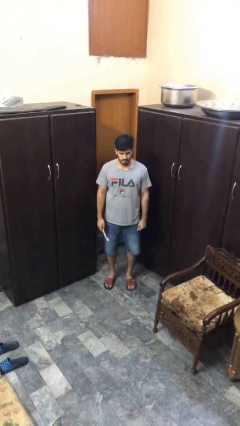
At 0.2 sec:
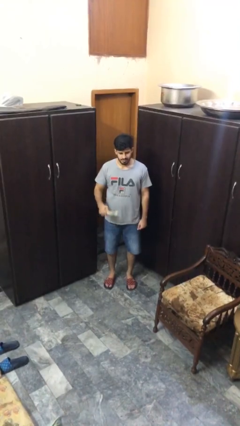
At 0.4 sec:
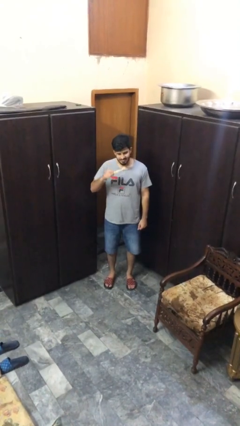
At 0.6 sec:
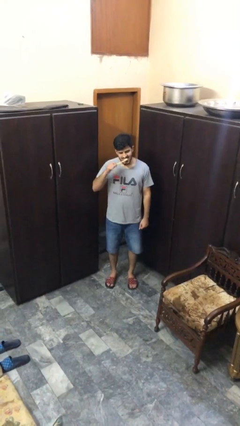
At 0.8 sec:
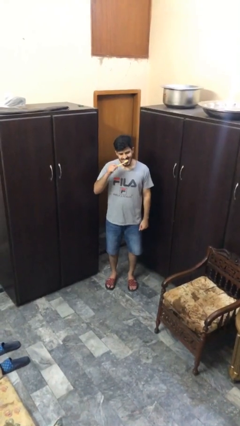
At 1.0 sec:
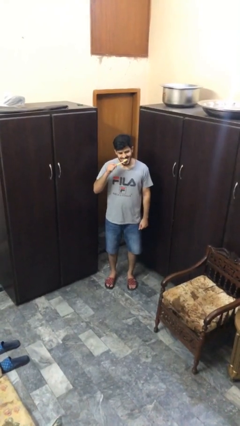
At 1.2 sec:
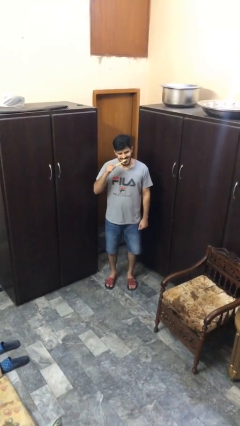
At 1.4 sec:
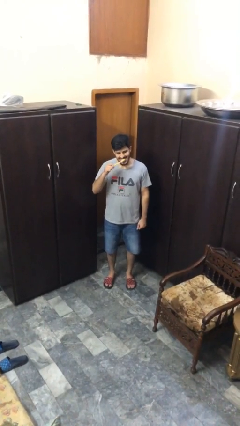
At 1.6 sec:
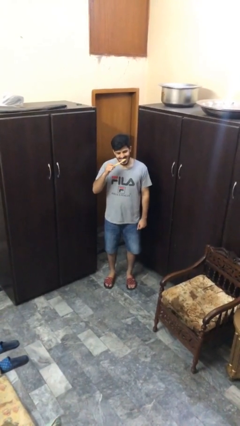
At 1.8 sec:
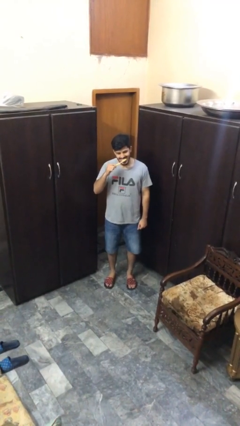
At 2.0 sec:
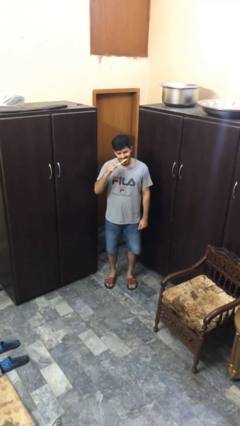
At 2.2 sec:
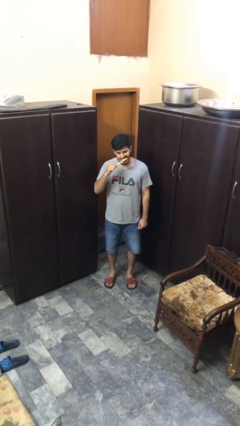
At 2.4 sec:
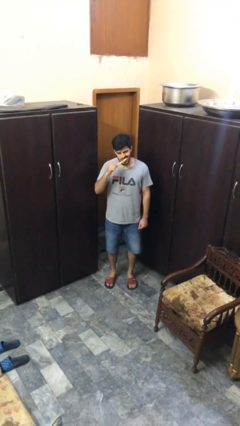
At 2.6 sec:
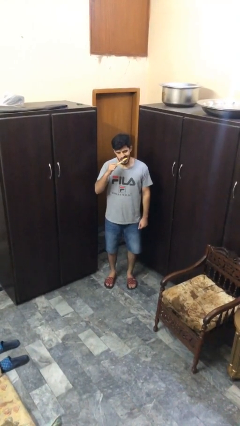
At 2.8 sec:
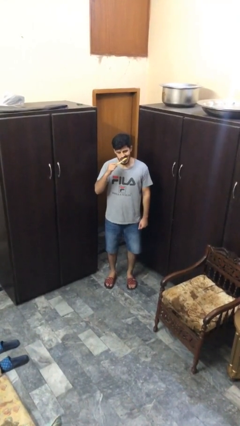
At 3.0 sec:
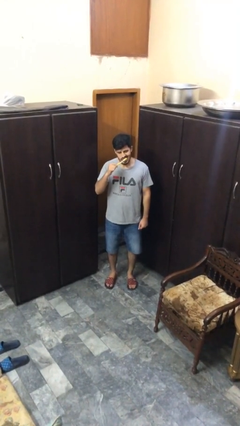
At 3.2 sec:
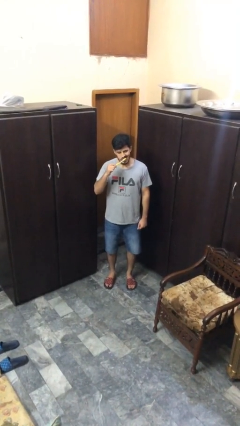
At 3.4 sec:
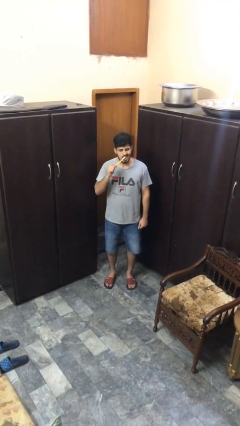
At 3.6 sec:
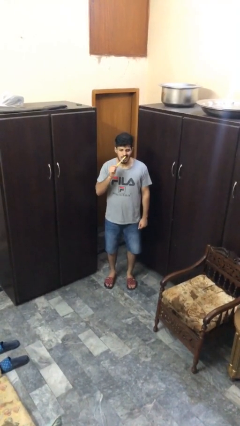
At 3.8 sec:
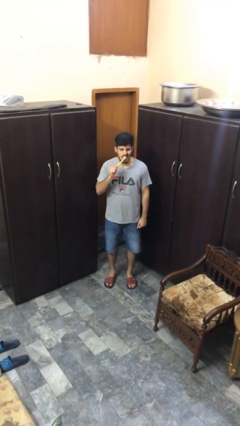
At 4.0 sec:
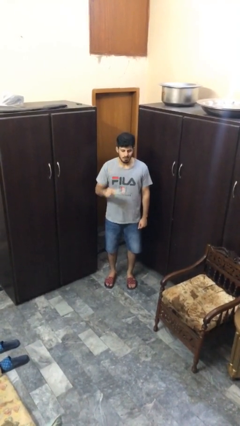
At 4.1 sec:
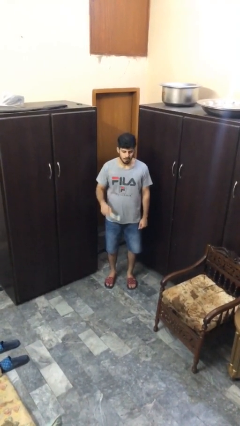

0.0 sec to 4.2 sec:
person brushes teeth

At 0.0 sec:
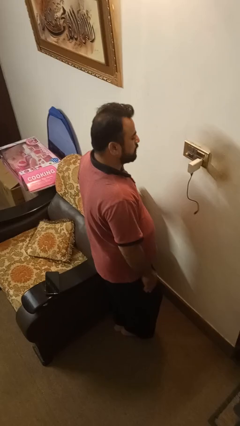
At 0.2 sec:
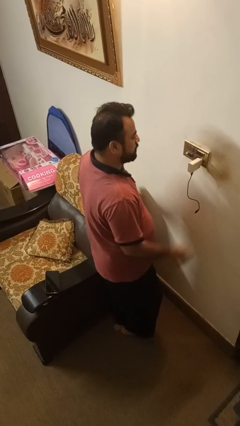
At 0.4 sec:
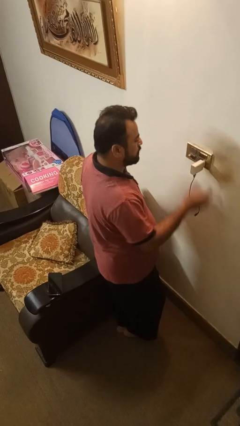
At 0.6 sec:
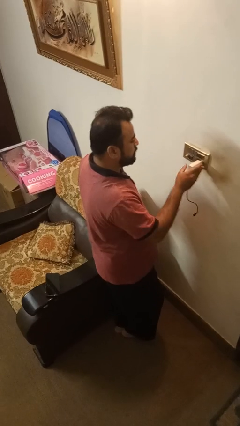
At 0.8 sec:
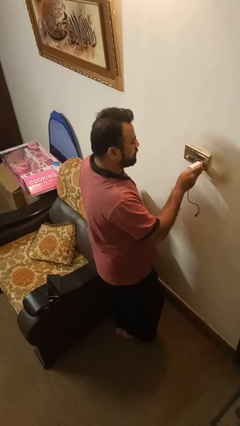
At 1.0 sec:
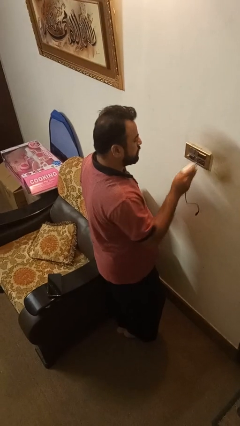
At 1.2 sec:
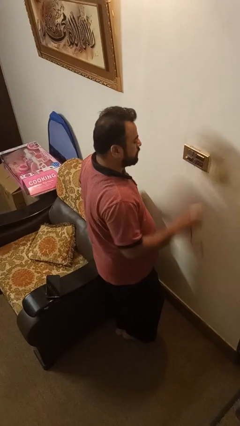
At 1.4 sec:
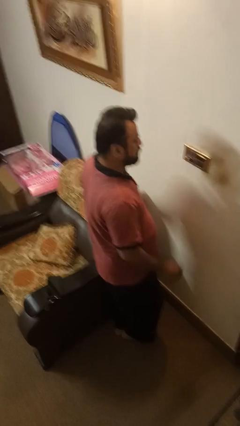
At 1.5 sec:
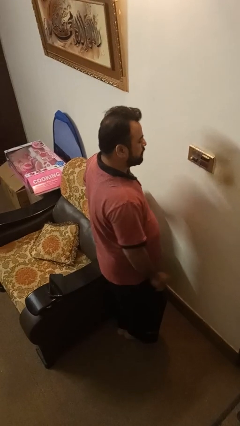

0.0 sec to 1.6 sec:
person unplugs from electrical socket

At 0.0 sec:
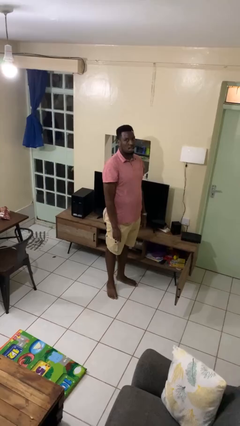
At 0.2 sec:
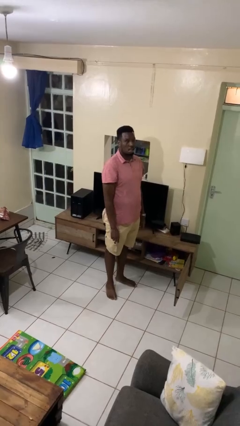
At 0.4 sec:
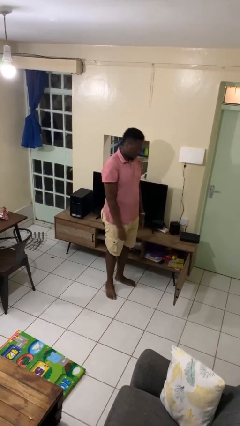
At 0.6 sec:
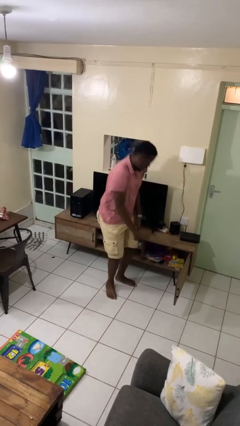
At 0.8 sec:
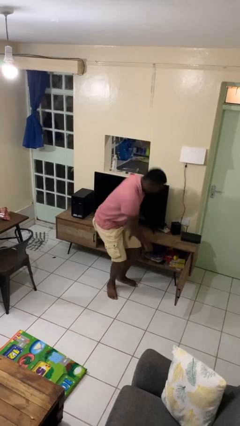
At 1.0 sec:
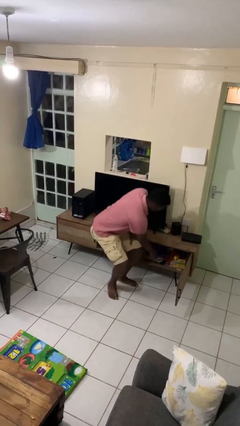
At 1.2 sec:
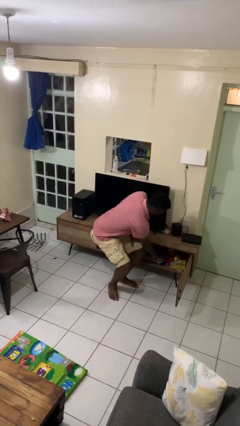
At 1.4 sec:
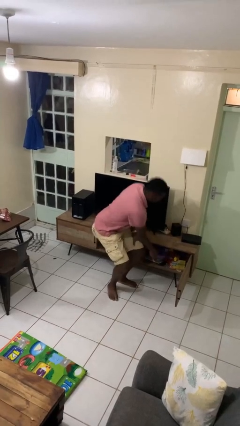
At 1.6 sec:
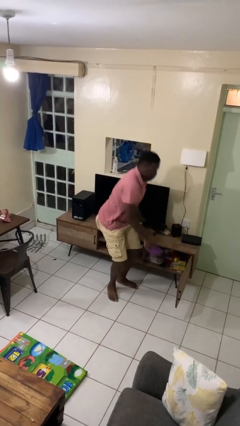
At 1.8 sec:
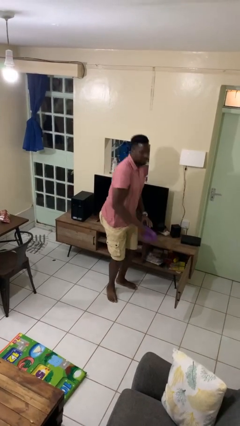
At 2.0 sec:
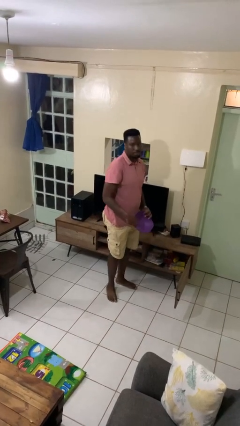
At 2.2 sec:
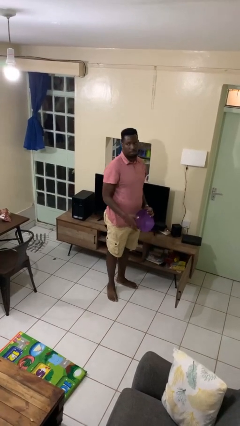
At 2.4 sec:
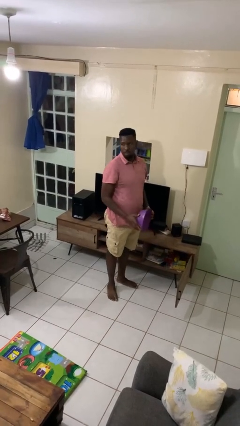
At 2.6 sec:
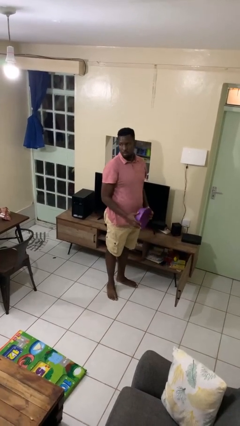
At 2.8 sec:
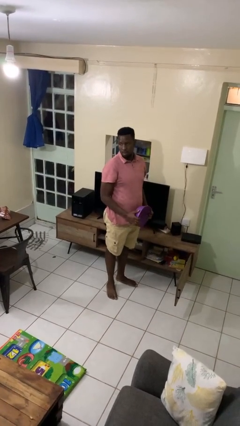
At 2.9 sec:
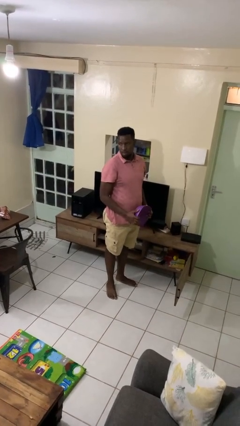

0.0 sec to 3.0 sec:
person picks up object from cabinet

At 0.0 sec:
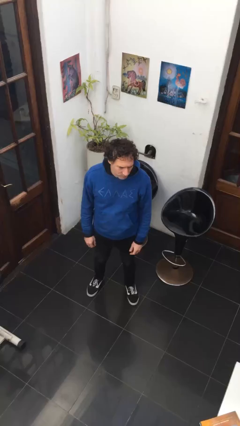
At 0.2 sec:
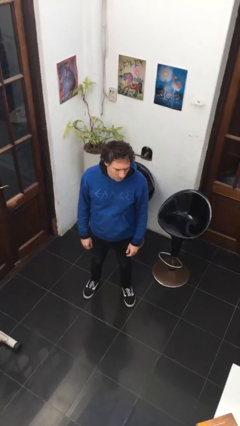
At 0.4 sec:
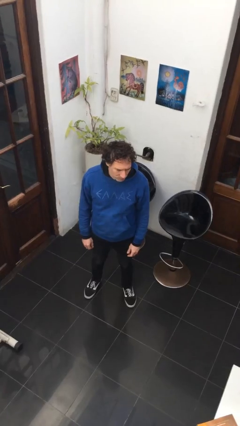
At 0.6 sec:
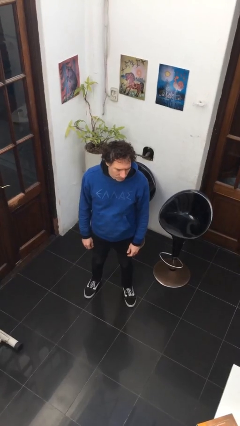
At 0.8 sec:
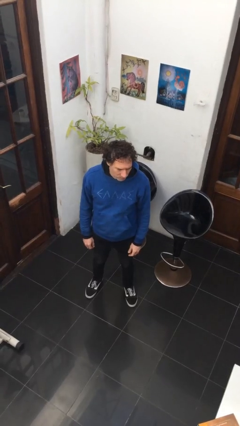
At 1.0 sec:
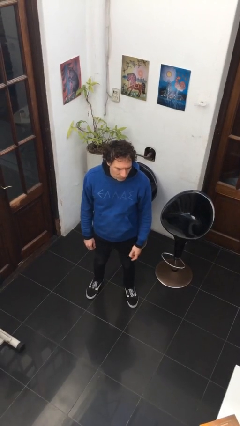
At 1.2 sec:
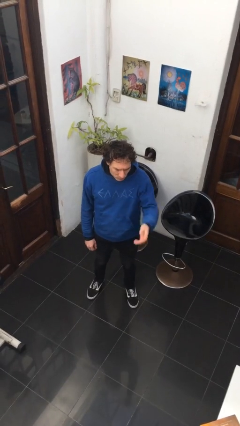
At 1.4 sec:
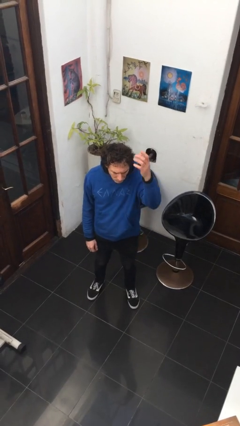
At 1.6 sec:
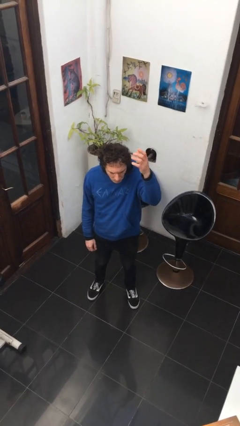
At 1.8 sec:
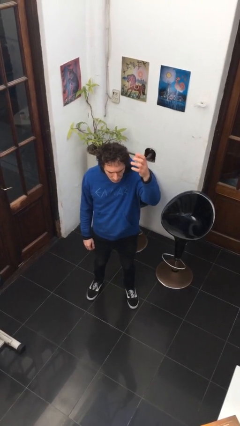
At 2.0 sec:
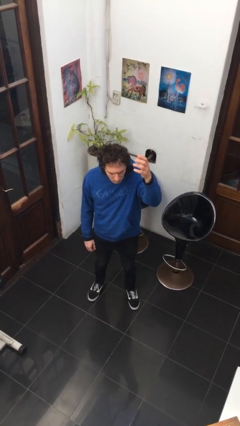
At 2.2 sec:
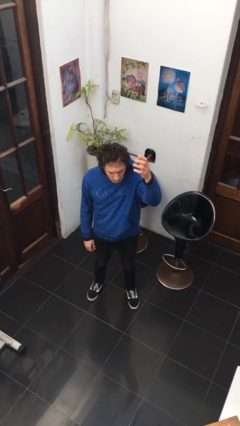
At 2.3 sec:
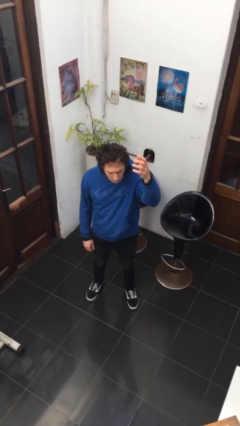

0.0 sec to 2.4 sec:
person gestures swipe up

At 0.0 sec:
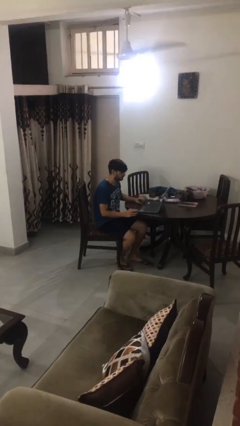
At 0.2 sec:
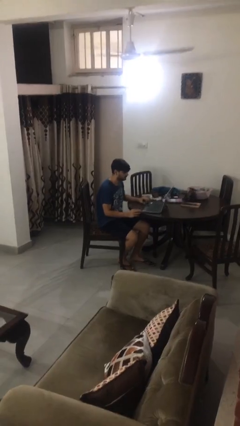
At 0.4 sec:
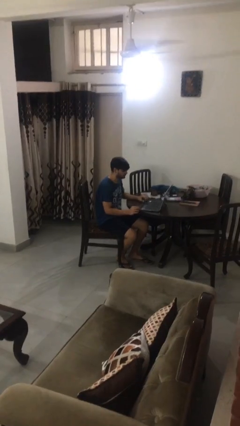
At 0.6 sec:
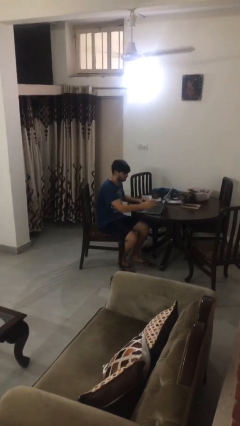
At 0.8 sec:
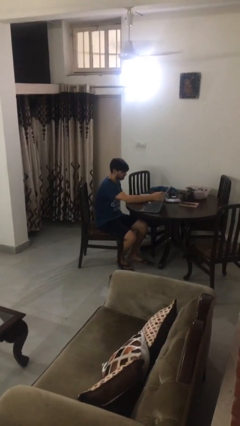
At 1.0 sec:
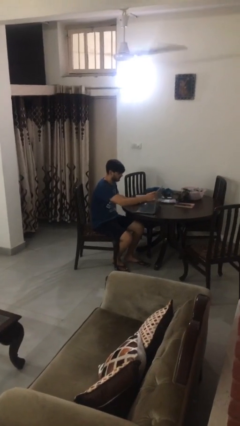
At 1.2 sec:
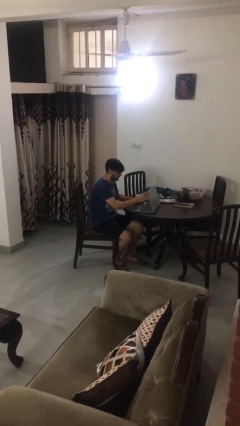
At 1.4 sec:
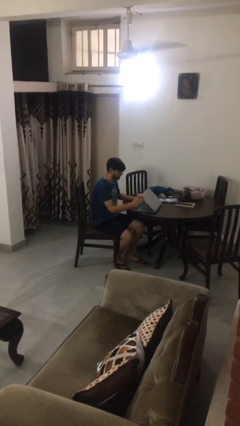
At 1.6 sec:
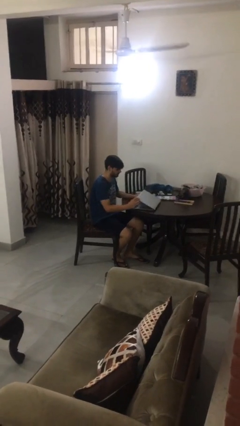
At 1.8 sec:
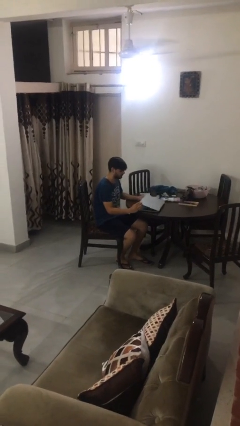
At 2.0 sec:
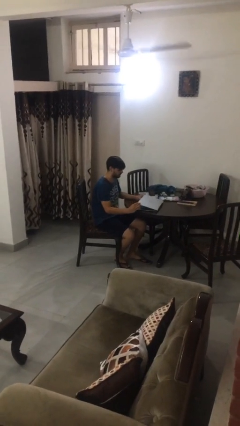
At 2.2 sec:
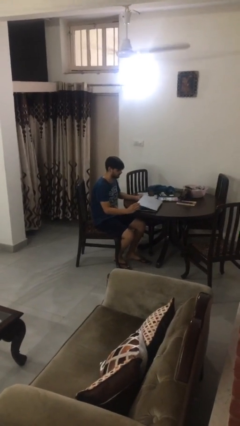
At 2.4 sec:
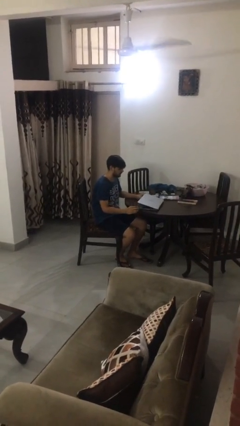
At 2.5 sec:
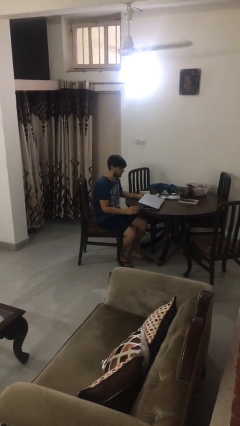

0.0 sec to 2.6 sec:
person closes laptop

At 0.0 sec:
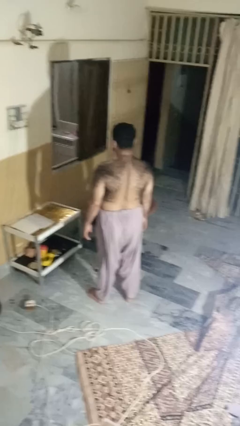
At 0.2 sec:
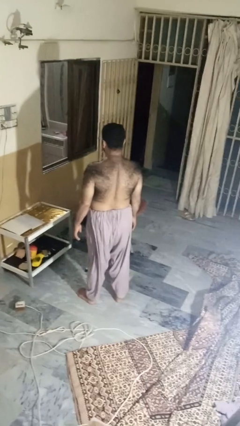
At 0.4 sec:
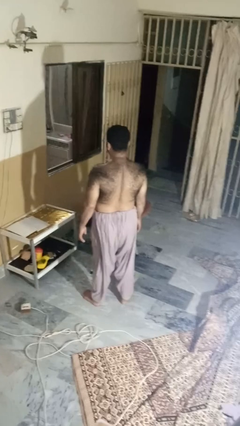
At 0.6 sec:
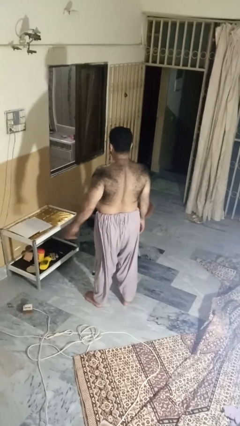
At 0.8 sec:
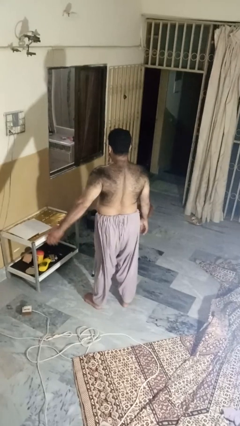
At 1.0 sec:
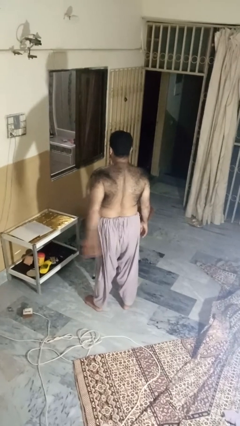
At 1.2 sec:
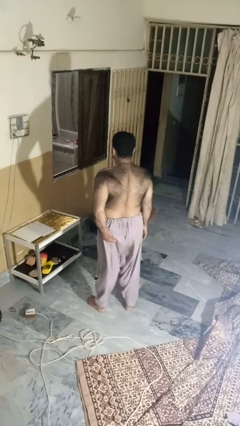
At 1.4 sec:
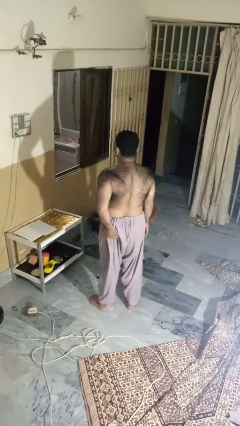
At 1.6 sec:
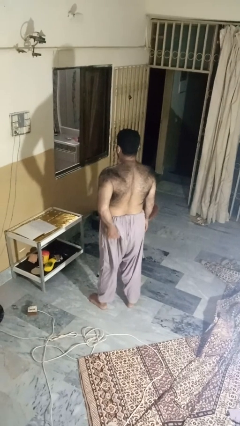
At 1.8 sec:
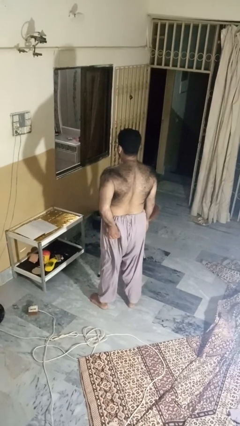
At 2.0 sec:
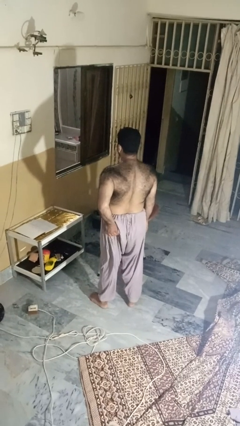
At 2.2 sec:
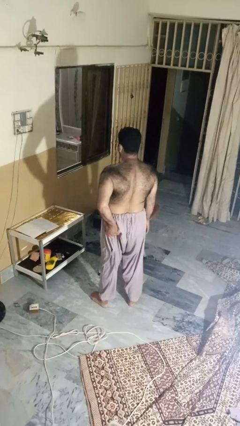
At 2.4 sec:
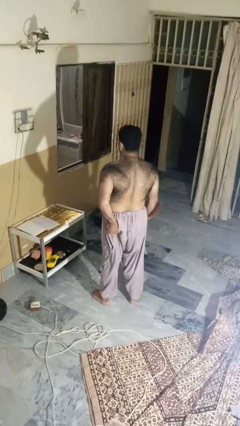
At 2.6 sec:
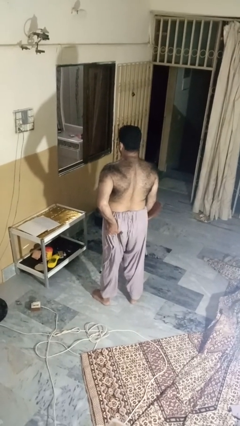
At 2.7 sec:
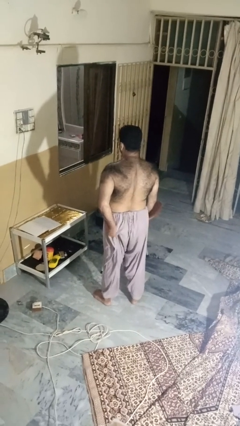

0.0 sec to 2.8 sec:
person wiggles hips

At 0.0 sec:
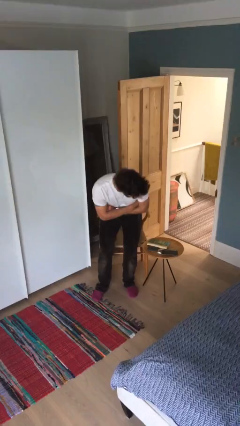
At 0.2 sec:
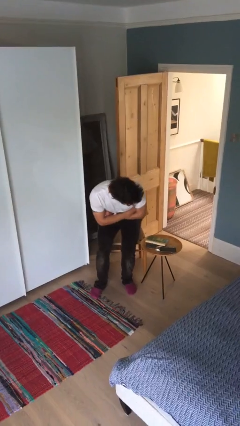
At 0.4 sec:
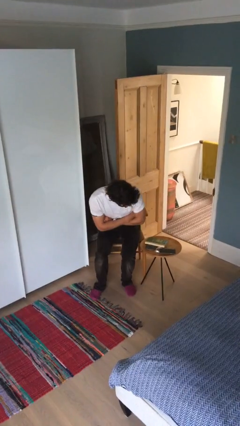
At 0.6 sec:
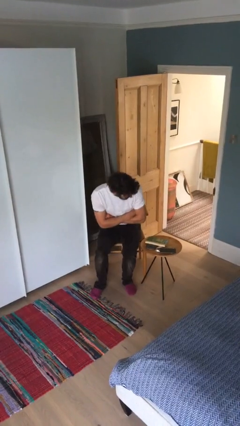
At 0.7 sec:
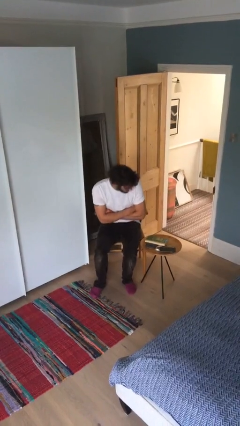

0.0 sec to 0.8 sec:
person sits down
